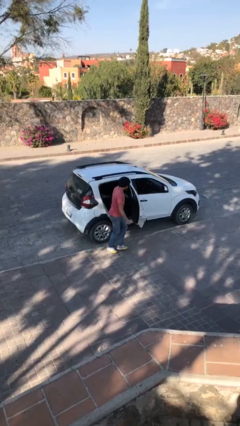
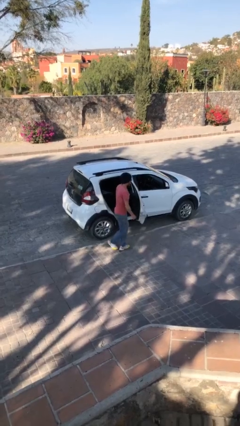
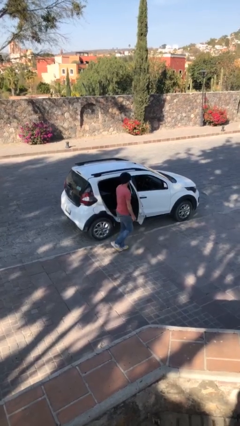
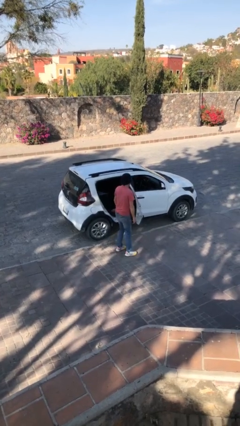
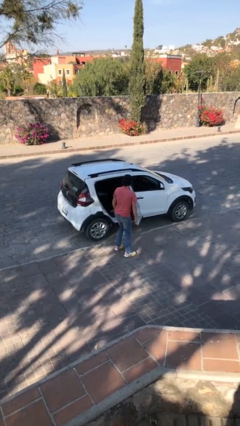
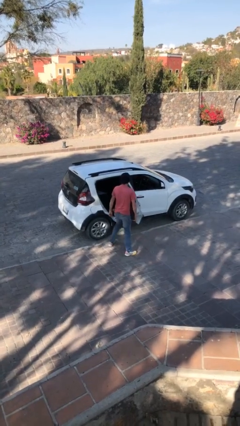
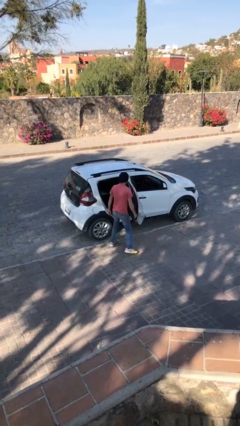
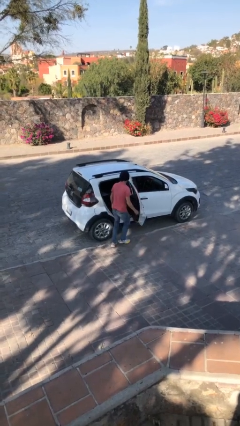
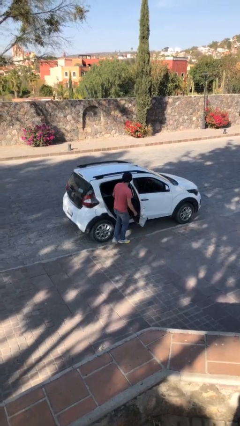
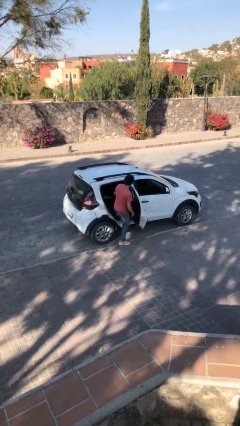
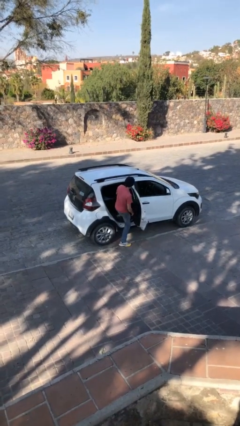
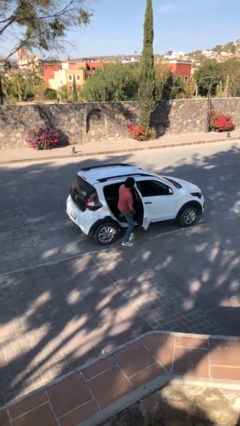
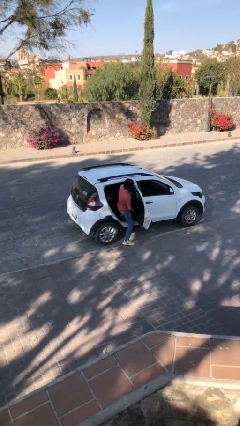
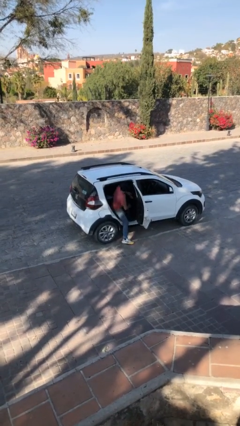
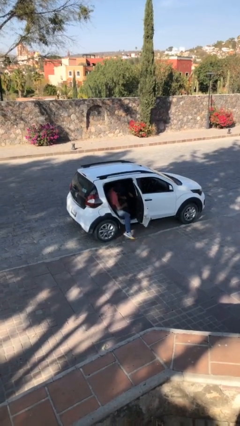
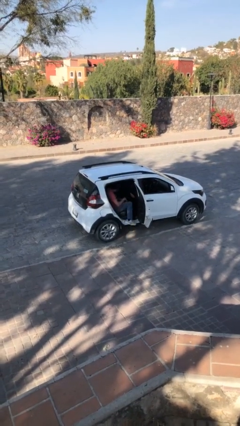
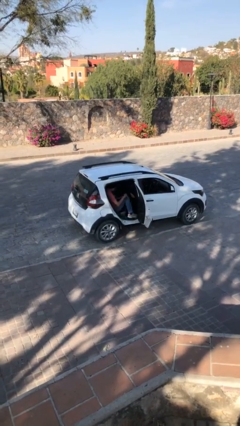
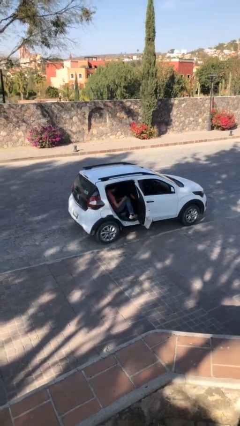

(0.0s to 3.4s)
person enters car

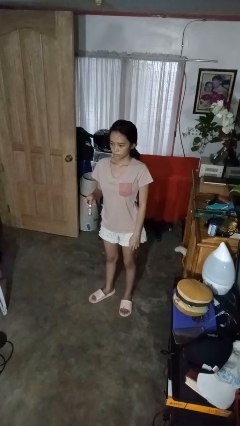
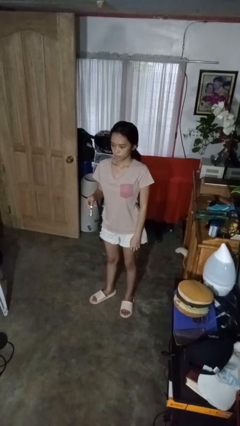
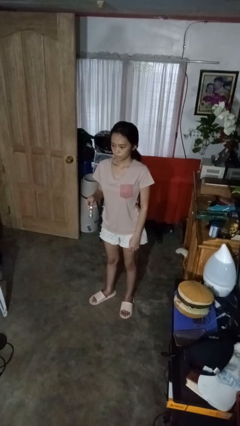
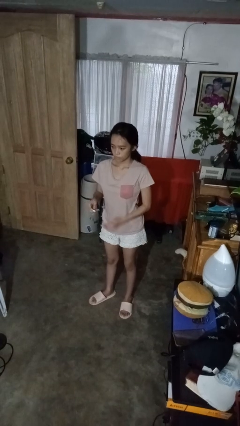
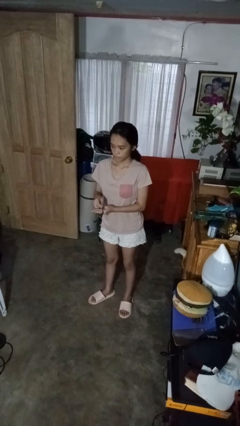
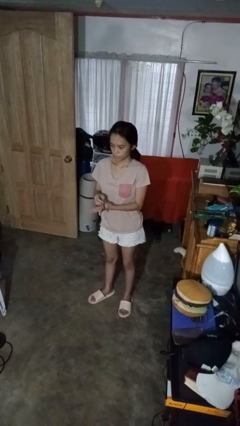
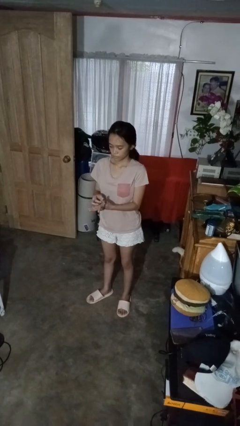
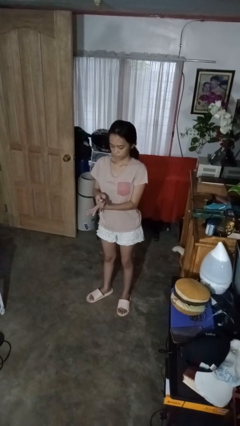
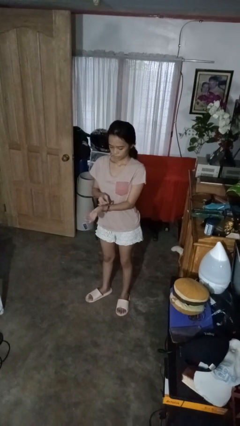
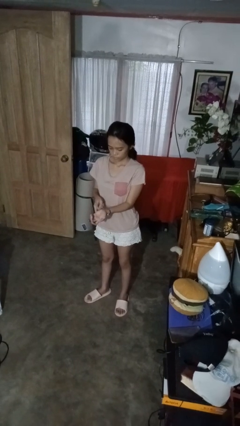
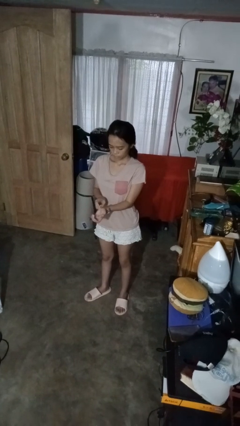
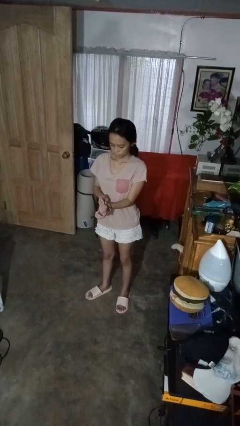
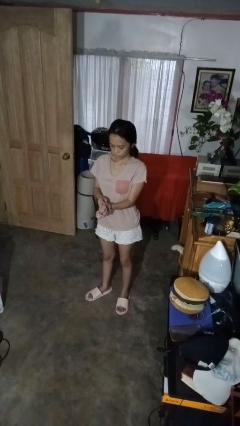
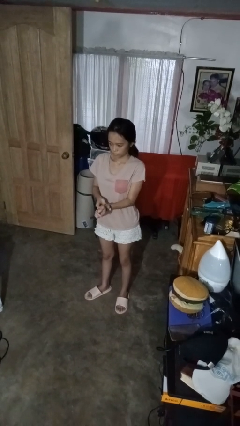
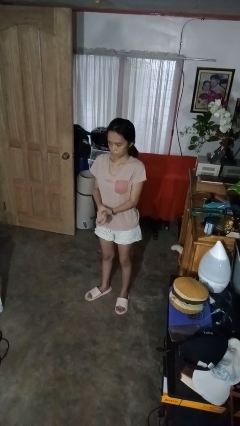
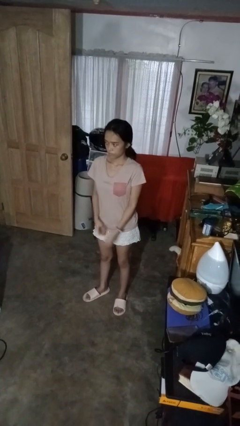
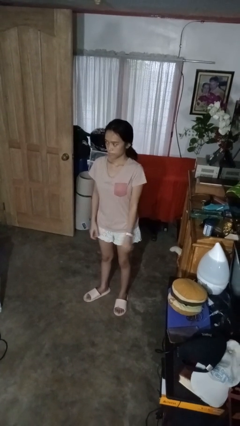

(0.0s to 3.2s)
person puts on wristwatch

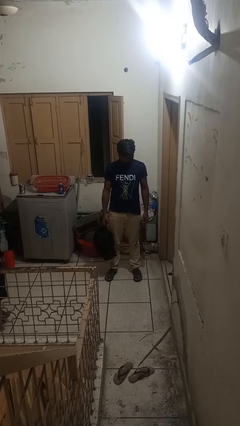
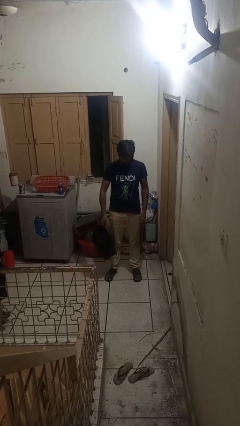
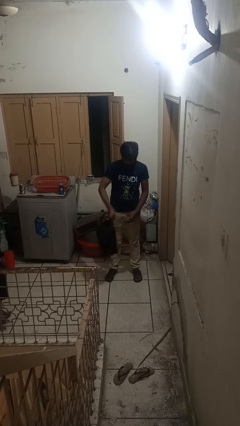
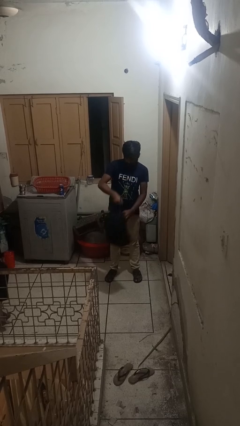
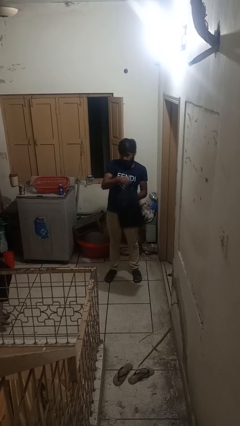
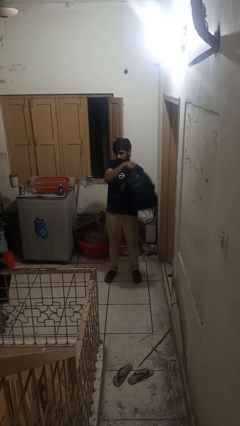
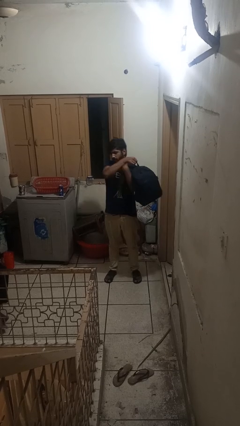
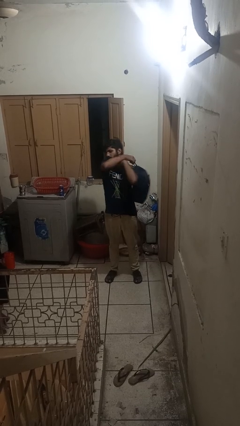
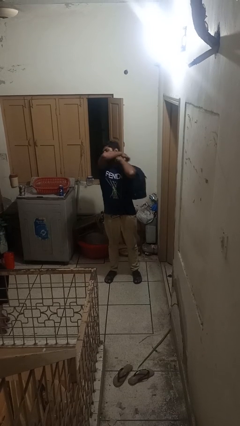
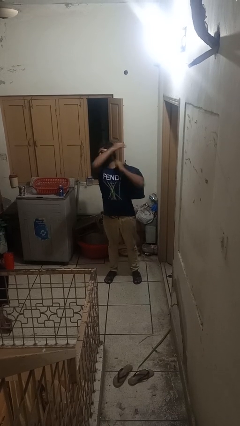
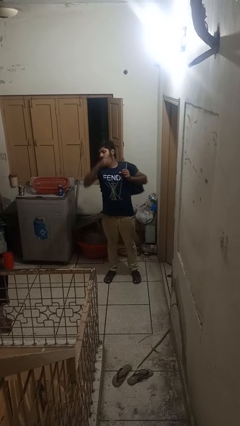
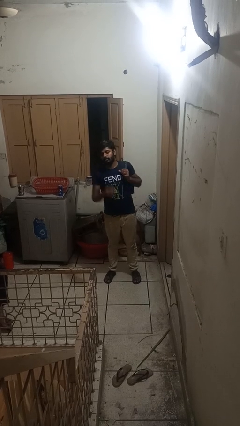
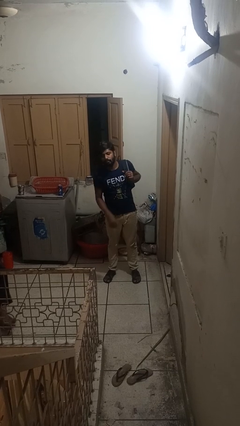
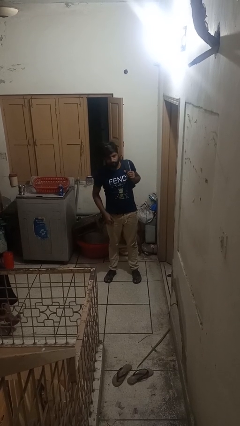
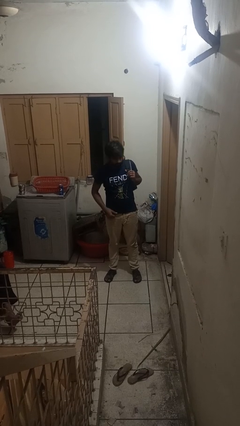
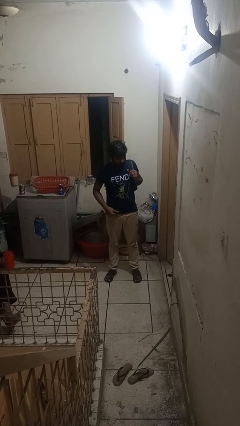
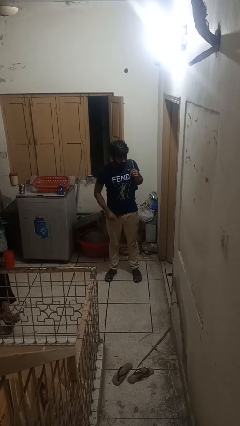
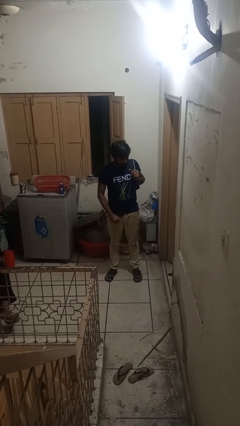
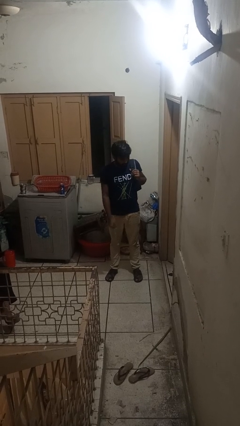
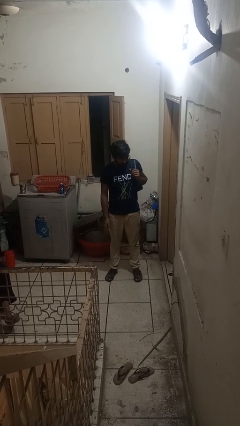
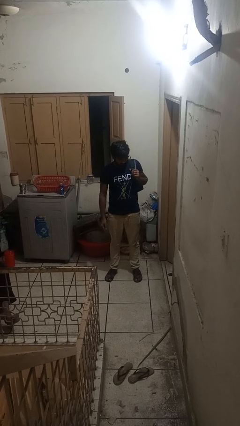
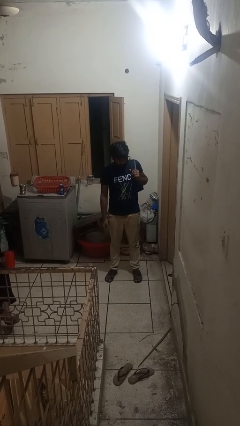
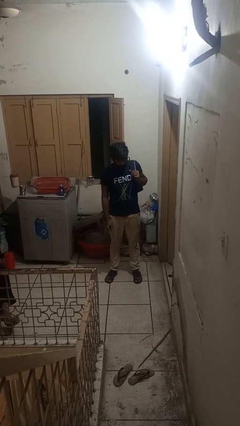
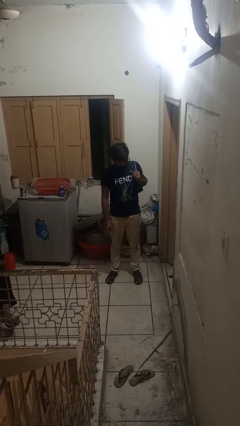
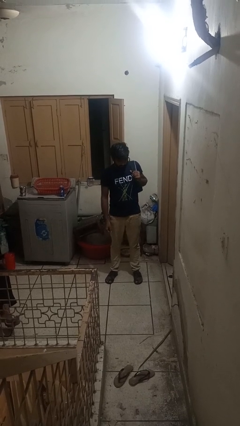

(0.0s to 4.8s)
person puts on backpack

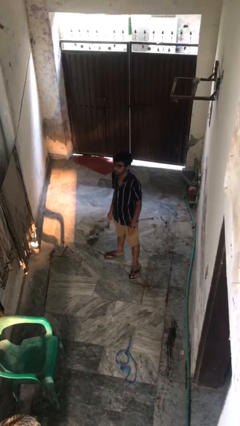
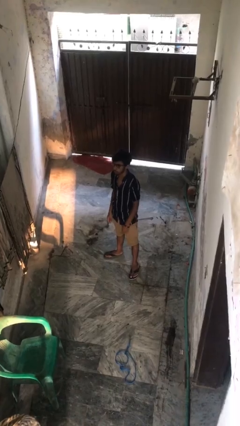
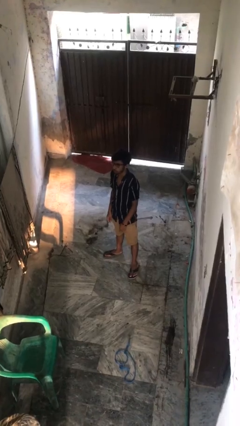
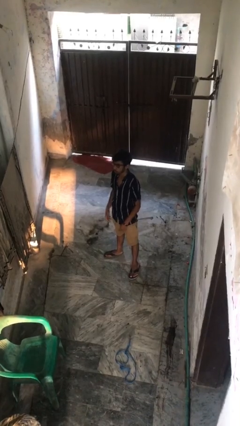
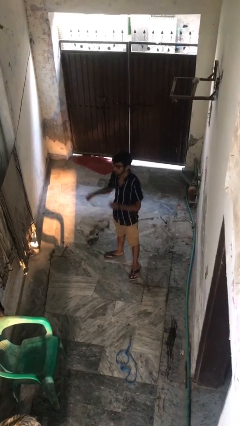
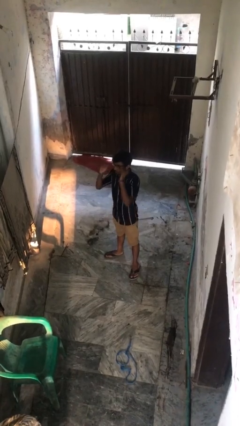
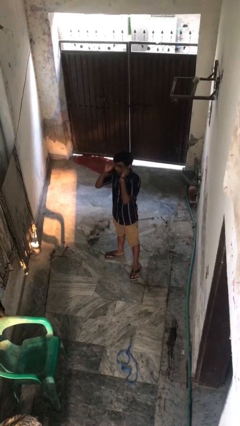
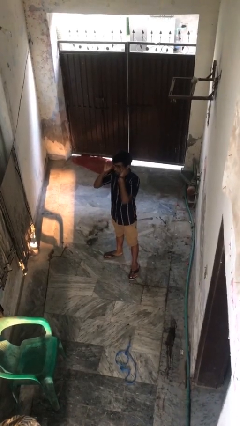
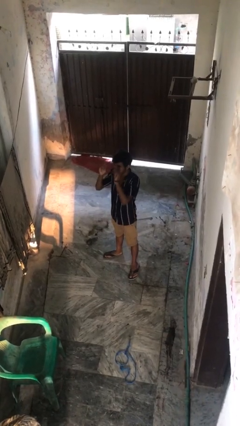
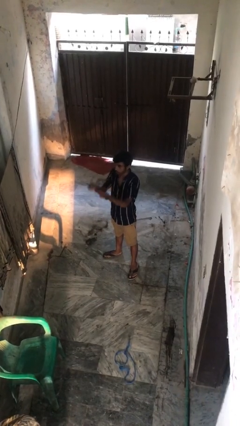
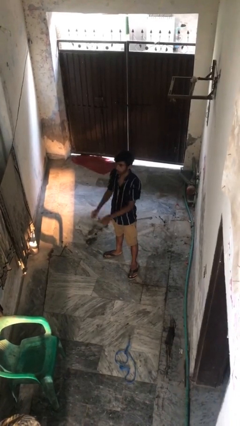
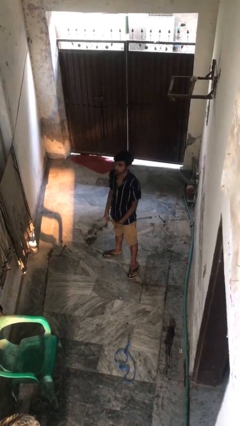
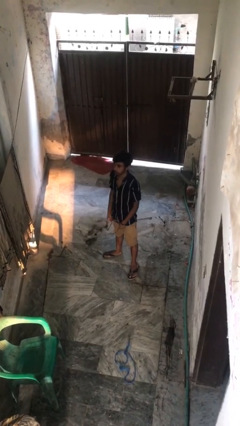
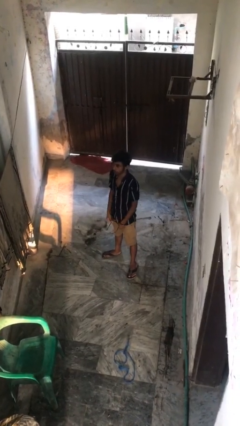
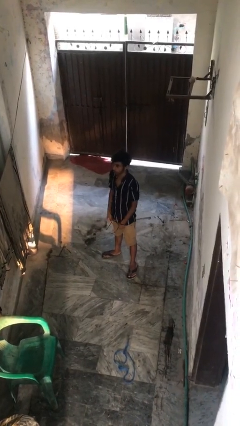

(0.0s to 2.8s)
person takes off glasses

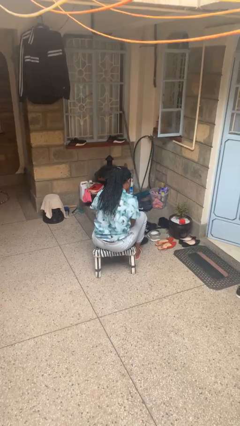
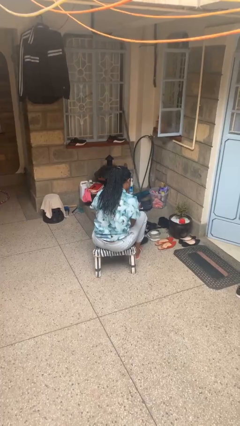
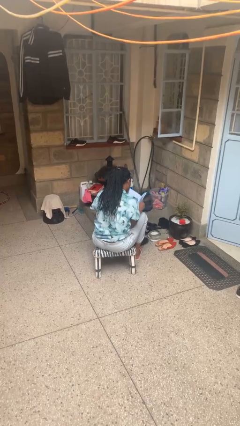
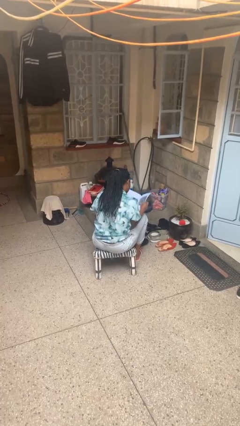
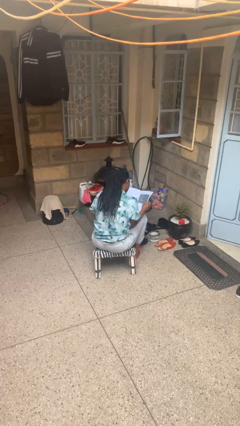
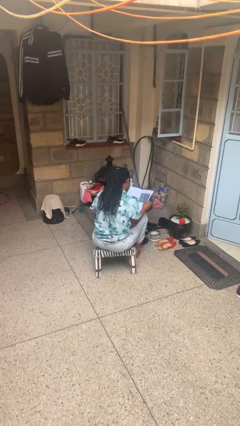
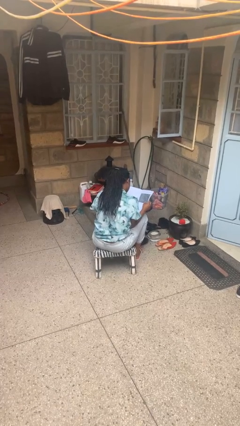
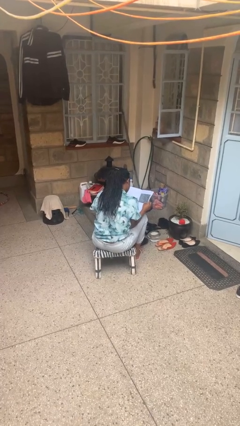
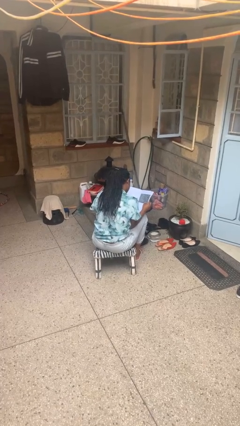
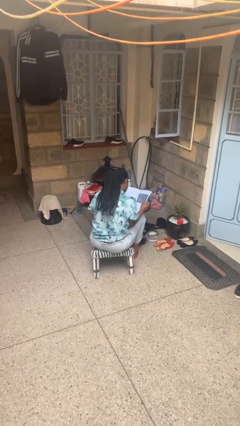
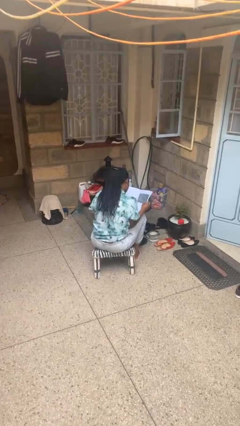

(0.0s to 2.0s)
person reads magazine

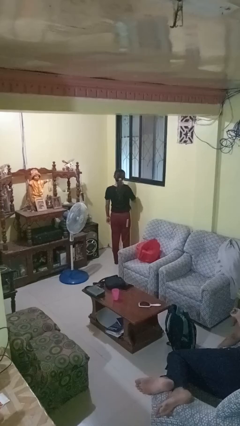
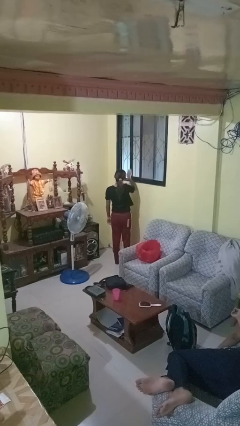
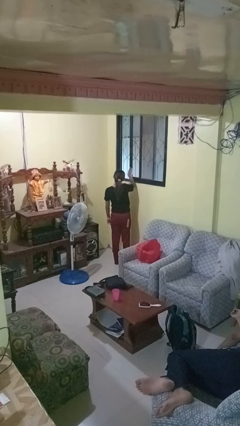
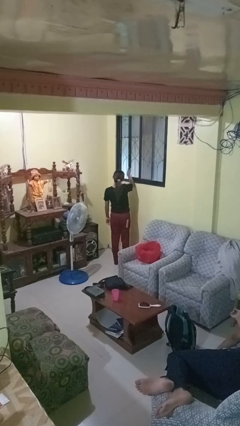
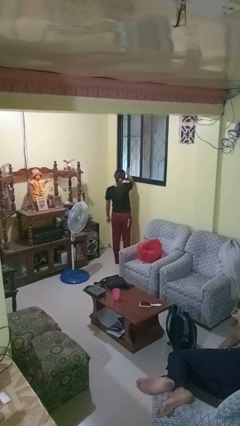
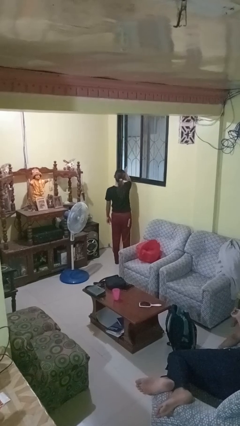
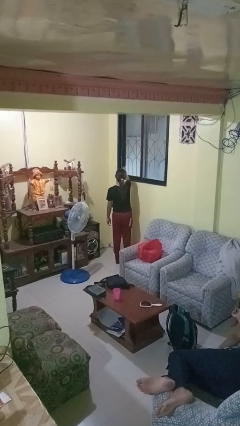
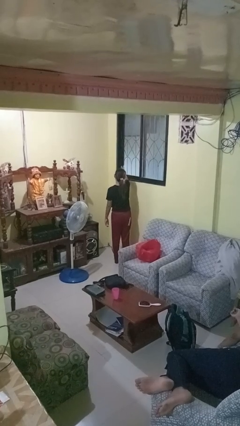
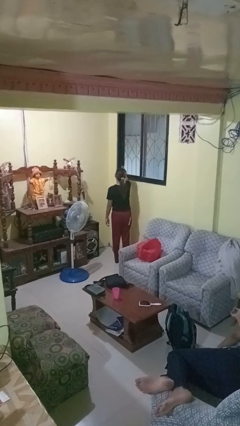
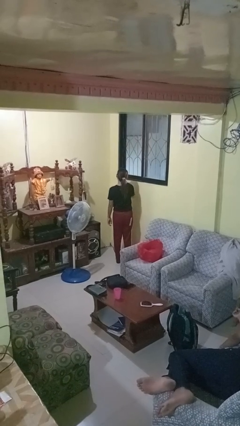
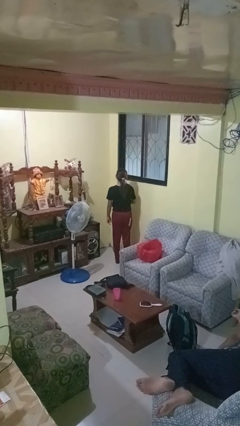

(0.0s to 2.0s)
person closes home window
